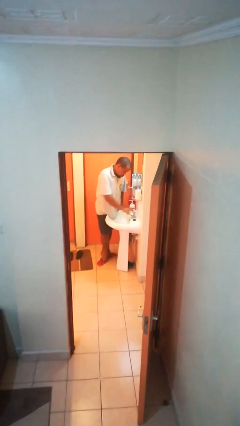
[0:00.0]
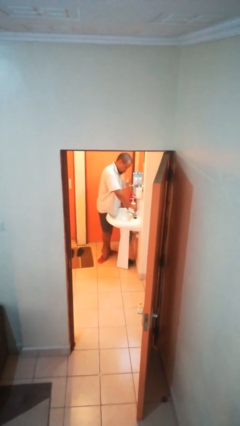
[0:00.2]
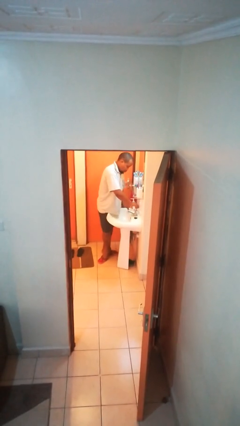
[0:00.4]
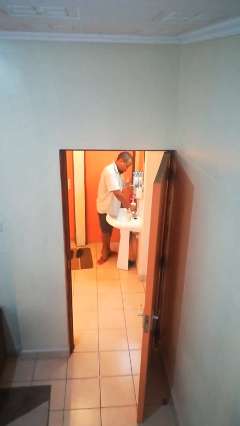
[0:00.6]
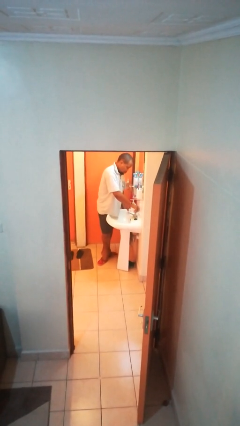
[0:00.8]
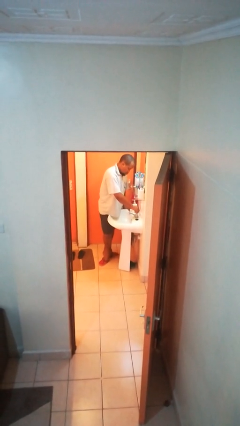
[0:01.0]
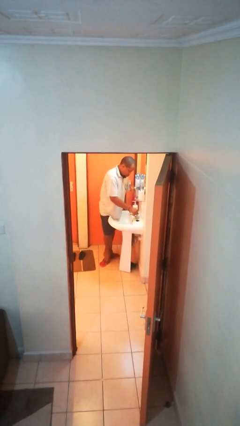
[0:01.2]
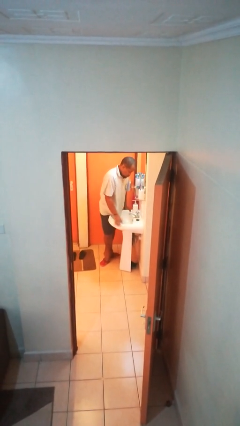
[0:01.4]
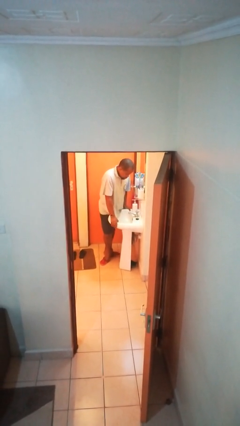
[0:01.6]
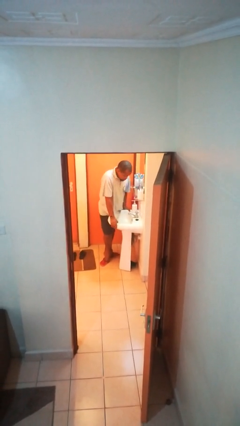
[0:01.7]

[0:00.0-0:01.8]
person turns off faucet

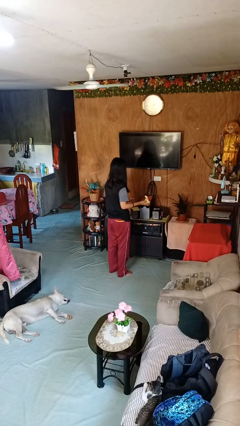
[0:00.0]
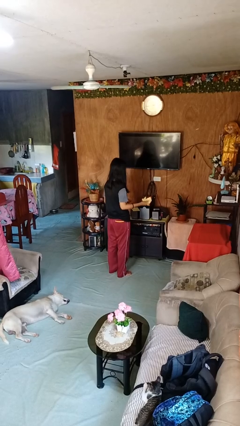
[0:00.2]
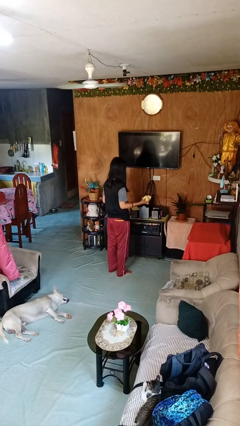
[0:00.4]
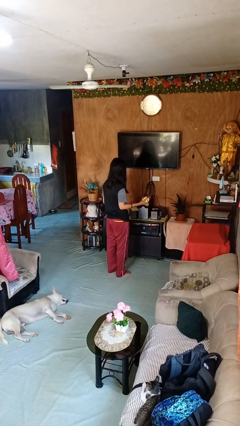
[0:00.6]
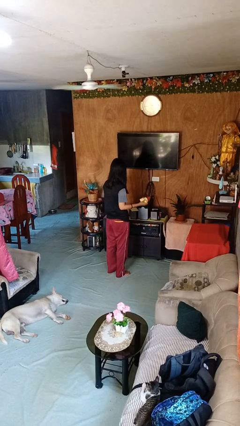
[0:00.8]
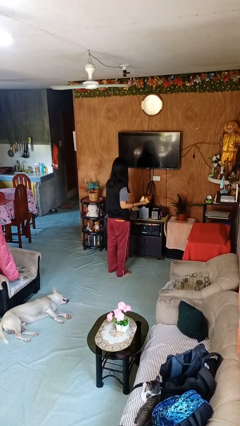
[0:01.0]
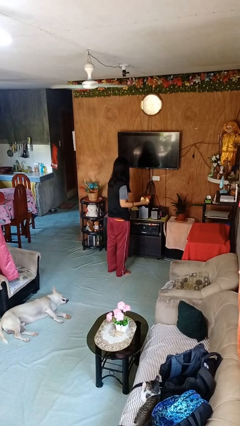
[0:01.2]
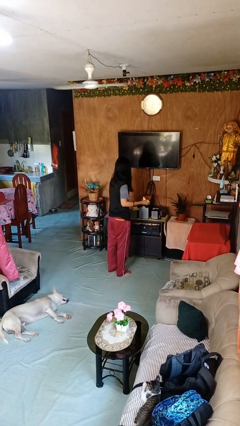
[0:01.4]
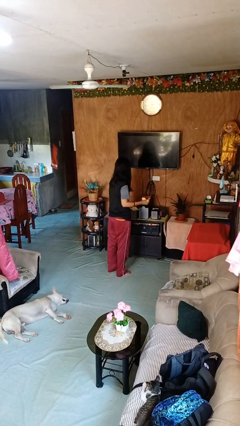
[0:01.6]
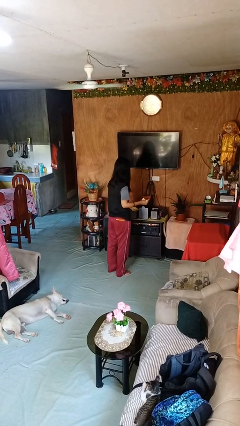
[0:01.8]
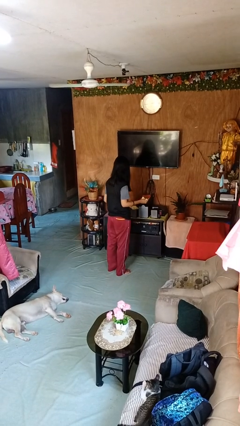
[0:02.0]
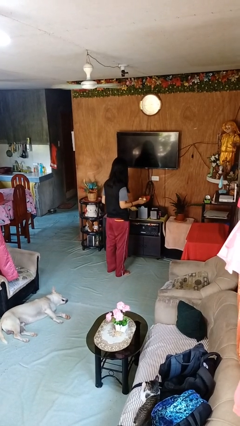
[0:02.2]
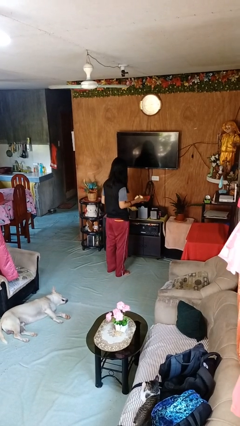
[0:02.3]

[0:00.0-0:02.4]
person crumples paper

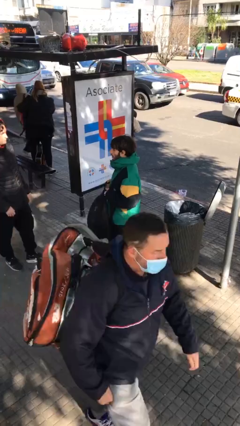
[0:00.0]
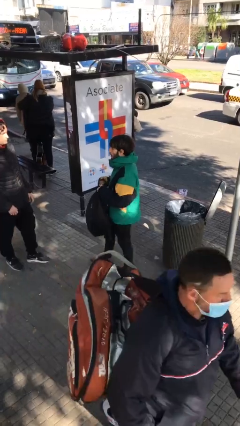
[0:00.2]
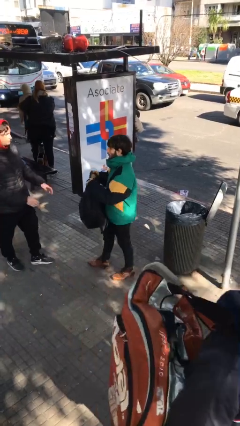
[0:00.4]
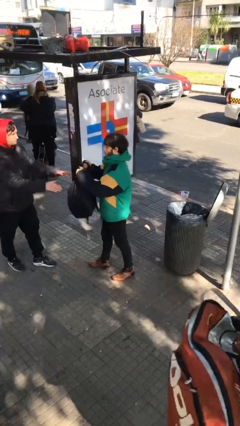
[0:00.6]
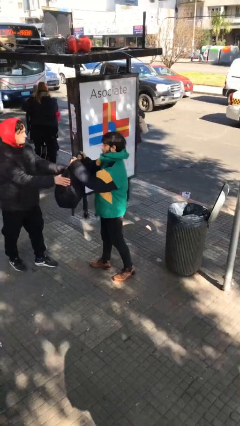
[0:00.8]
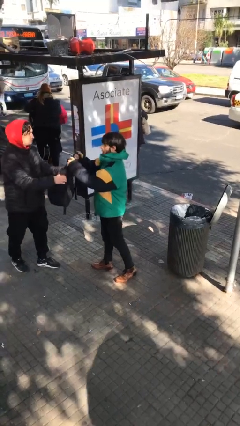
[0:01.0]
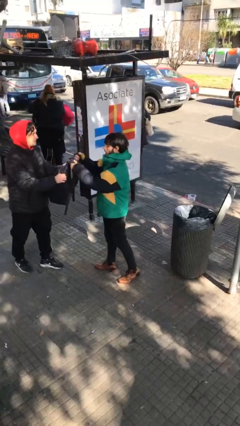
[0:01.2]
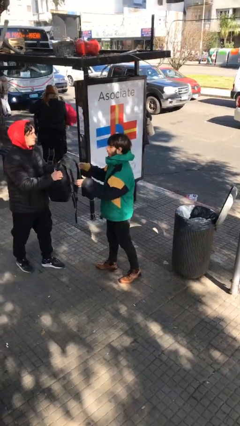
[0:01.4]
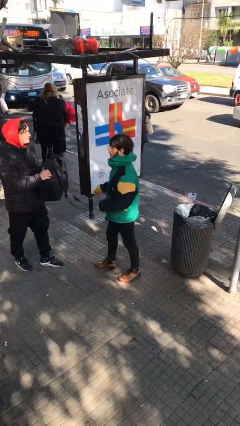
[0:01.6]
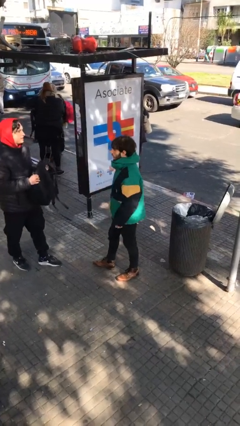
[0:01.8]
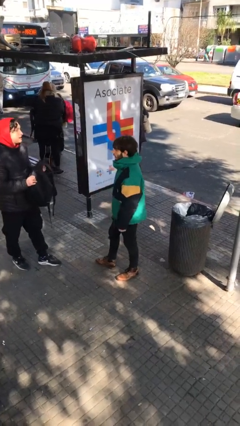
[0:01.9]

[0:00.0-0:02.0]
person transfers object to person

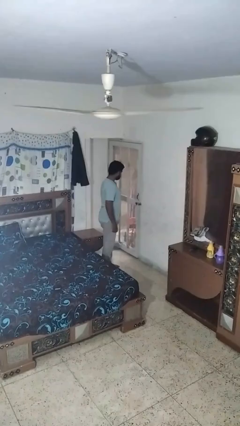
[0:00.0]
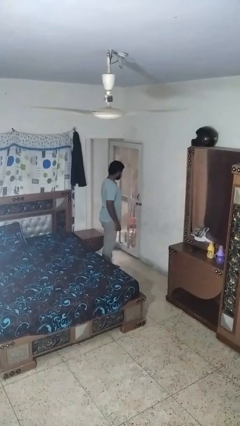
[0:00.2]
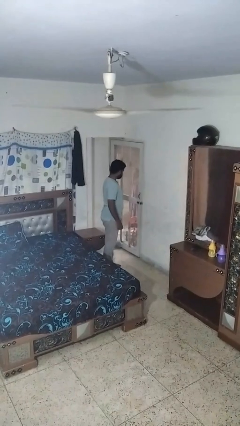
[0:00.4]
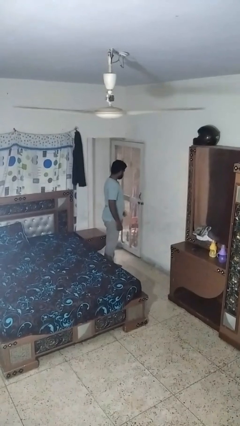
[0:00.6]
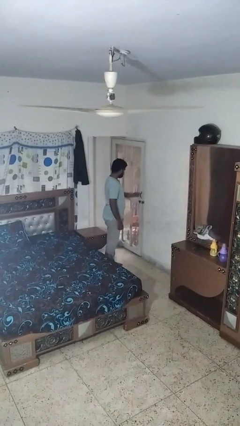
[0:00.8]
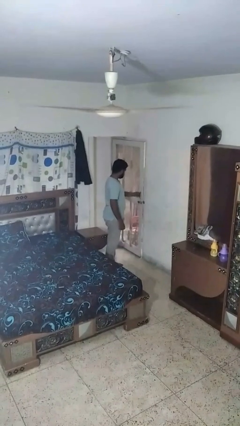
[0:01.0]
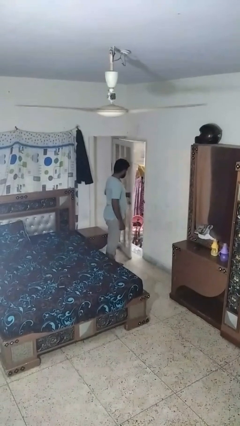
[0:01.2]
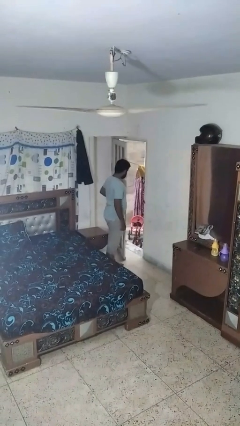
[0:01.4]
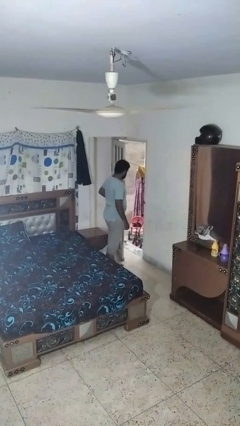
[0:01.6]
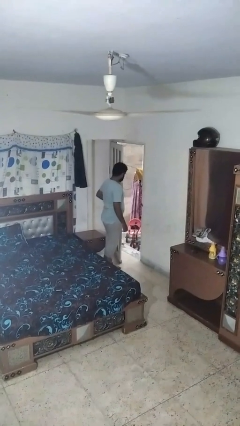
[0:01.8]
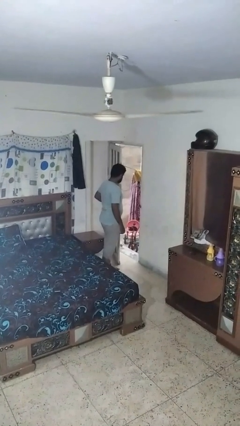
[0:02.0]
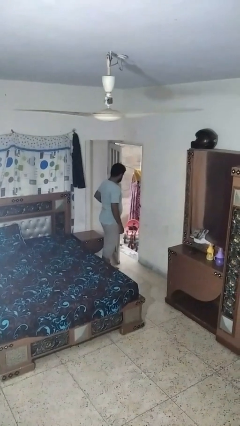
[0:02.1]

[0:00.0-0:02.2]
person opens facility door

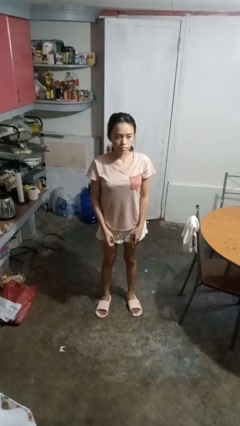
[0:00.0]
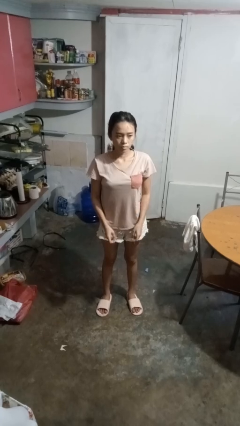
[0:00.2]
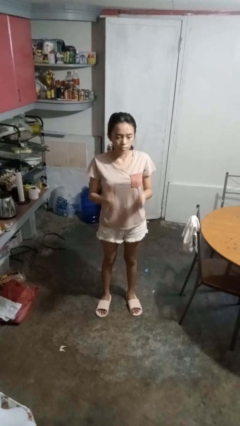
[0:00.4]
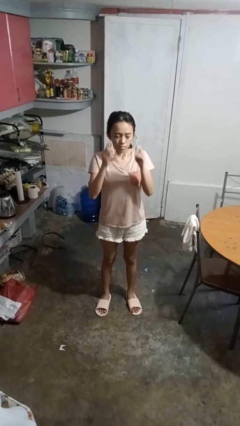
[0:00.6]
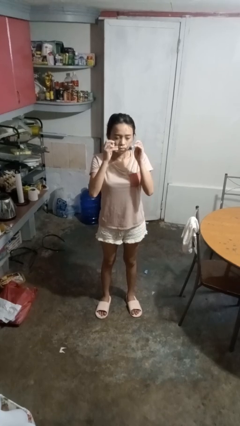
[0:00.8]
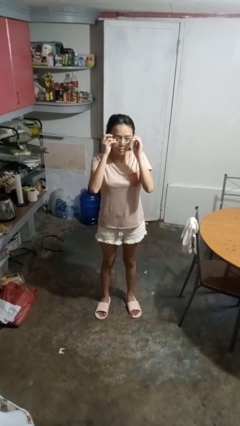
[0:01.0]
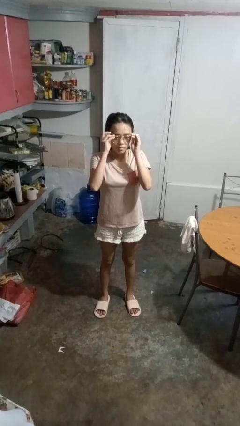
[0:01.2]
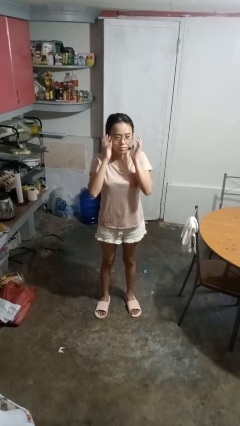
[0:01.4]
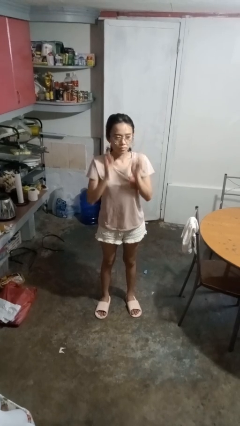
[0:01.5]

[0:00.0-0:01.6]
person puts on glasses

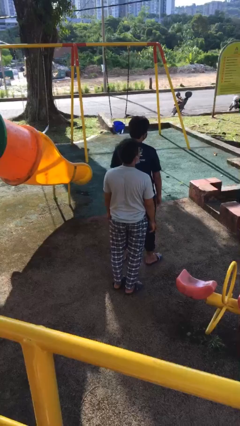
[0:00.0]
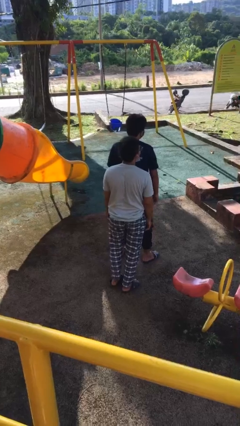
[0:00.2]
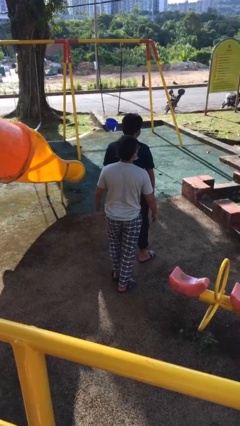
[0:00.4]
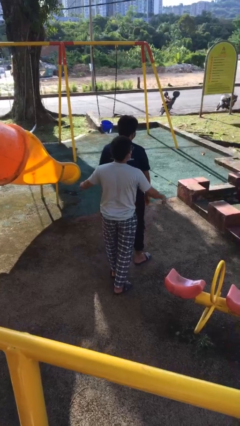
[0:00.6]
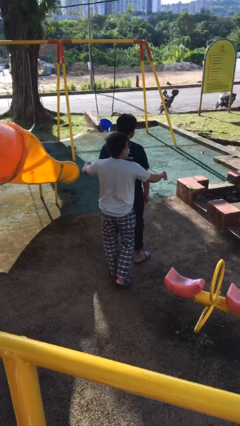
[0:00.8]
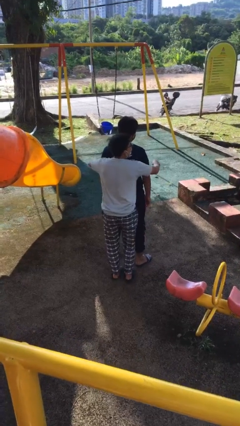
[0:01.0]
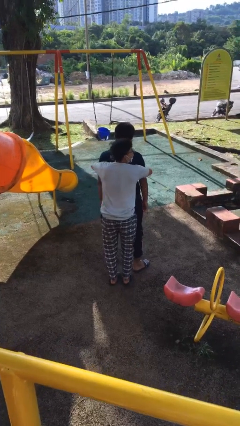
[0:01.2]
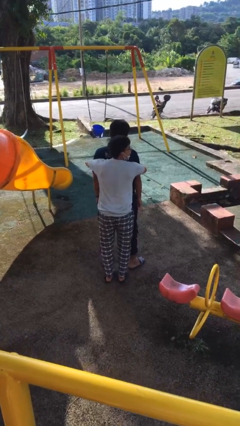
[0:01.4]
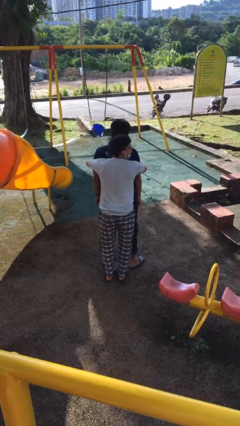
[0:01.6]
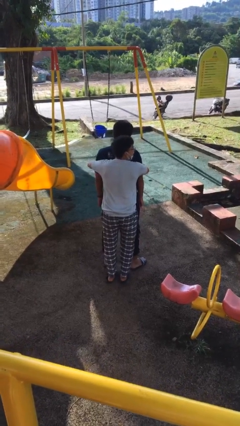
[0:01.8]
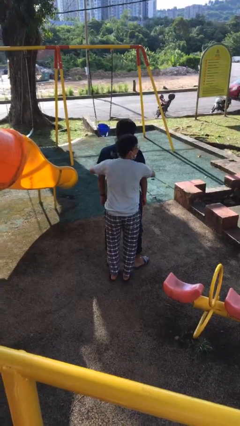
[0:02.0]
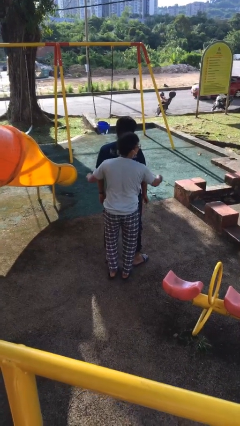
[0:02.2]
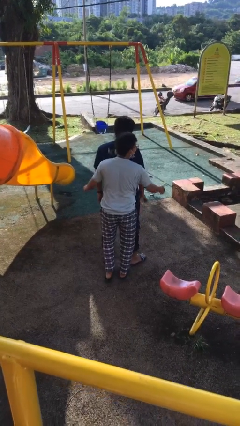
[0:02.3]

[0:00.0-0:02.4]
person hugs person from behind

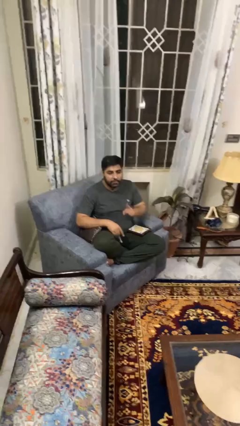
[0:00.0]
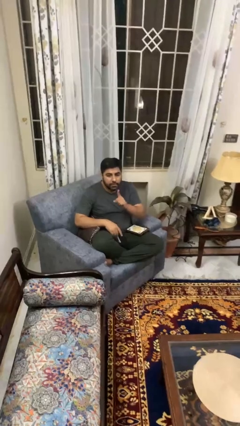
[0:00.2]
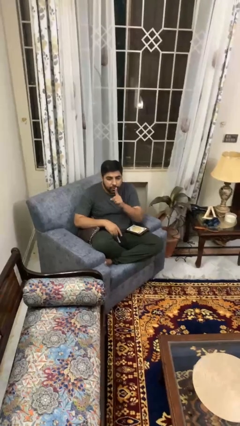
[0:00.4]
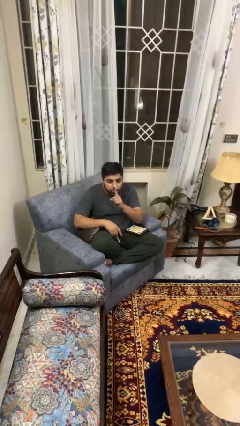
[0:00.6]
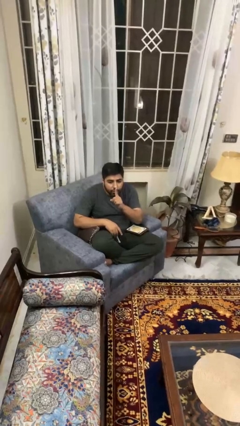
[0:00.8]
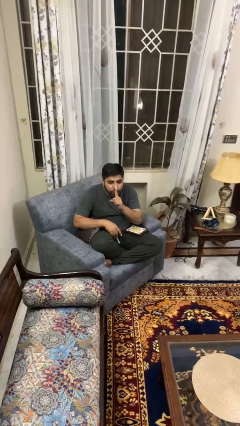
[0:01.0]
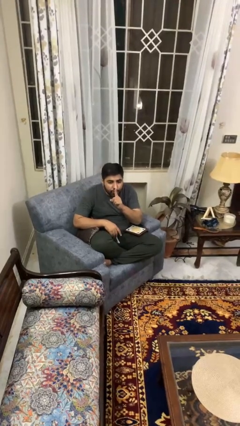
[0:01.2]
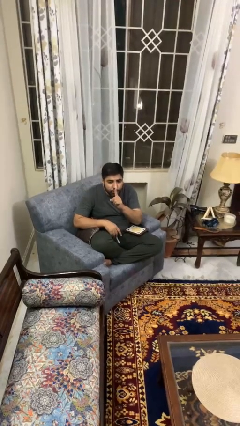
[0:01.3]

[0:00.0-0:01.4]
person gestures be quiet

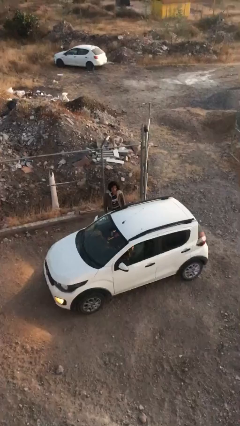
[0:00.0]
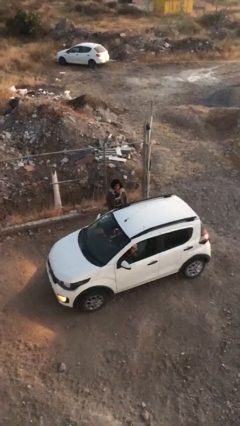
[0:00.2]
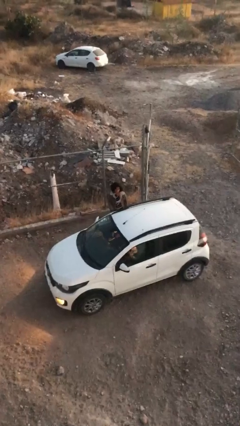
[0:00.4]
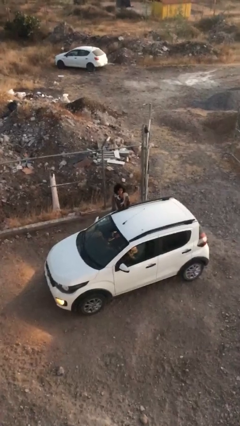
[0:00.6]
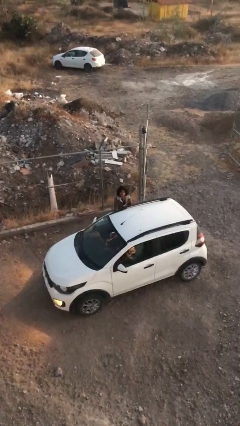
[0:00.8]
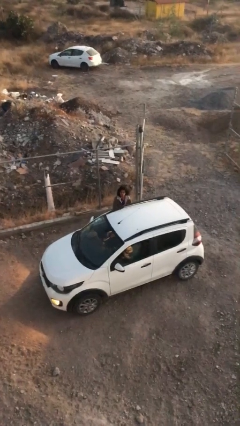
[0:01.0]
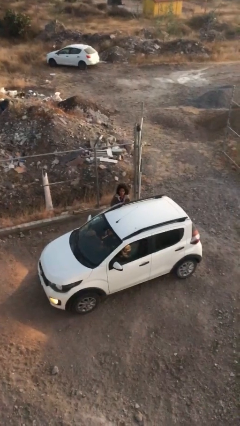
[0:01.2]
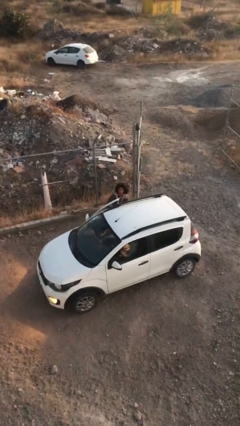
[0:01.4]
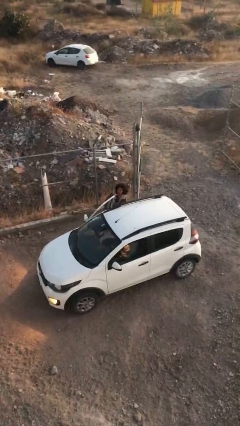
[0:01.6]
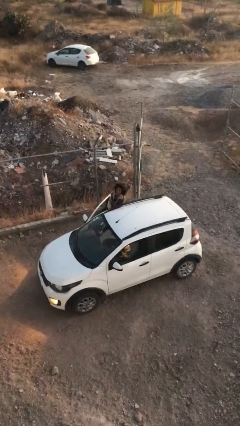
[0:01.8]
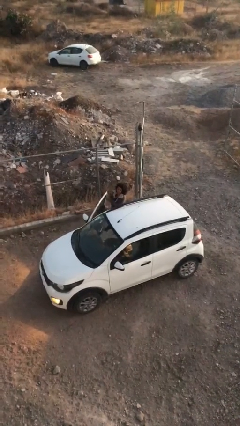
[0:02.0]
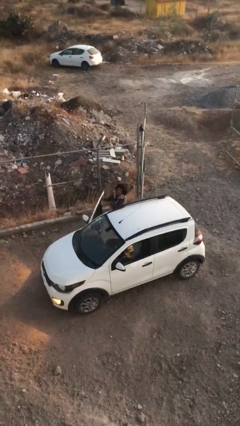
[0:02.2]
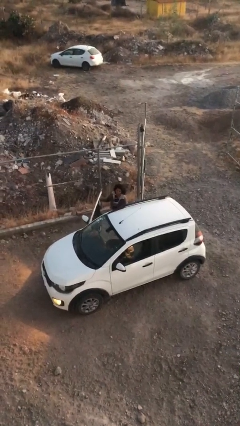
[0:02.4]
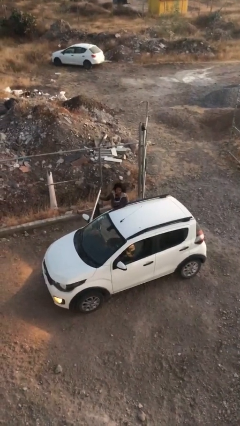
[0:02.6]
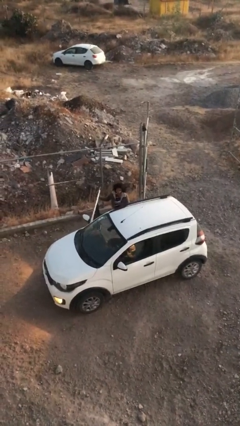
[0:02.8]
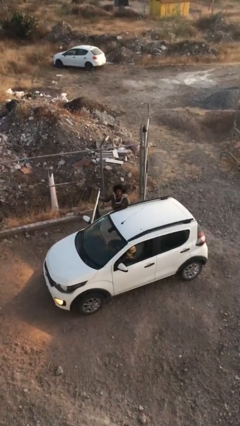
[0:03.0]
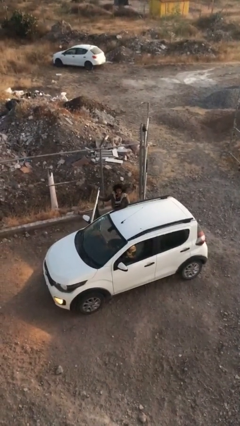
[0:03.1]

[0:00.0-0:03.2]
person opens car door

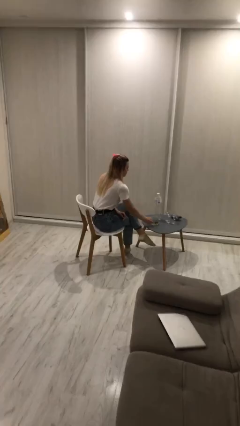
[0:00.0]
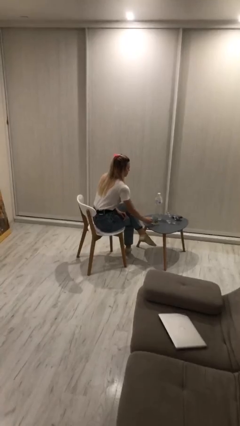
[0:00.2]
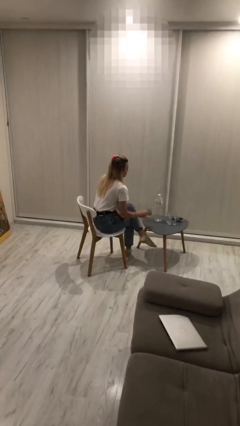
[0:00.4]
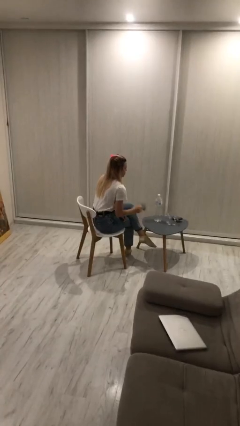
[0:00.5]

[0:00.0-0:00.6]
person picks up object from table
